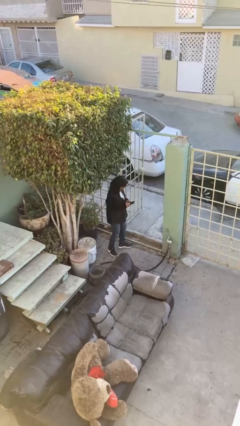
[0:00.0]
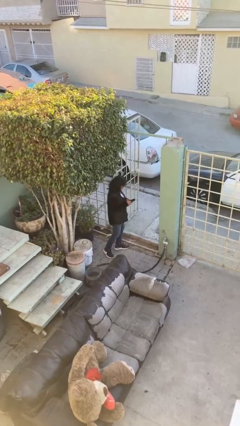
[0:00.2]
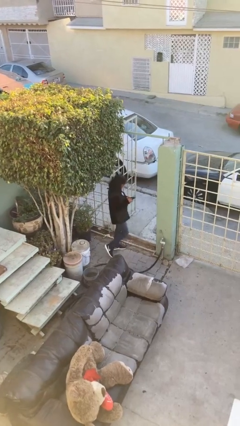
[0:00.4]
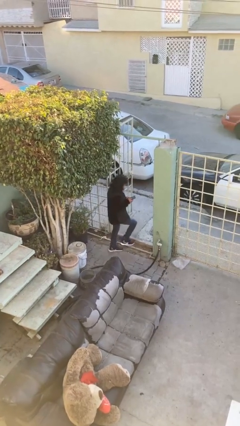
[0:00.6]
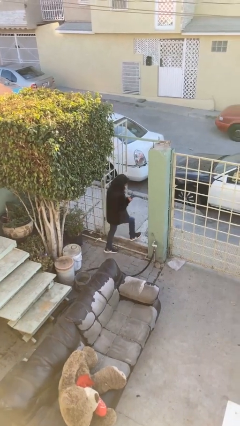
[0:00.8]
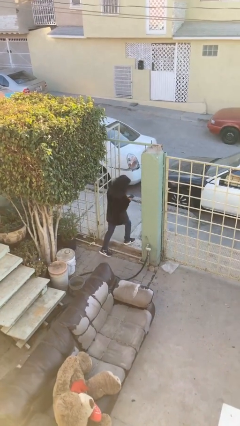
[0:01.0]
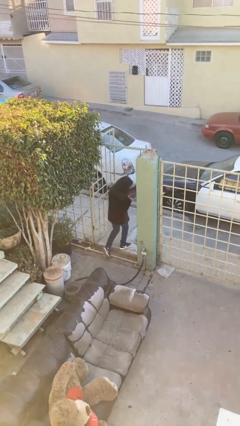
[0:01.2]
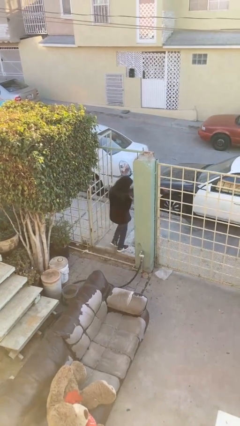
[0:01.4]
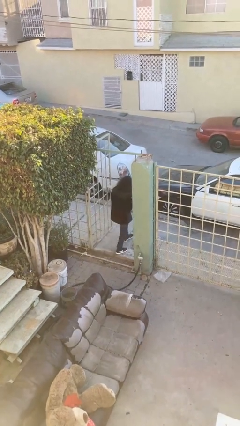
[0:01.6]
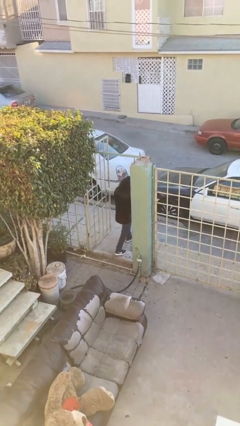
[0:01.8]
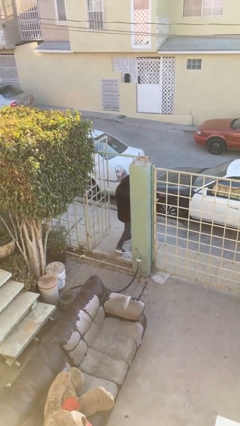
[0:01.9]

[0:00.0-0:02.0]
person exits scene through structure

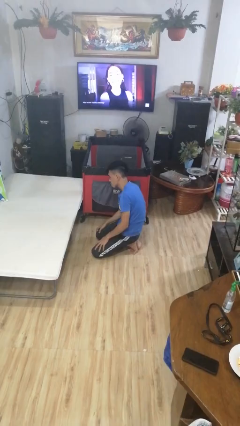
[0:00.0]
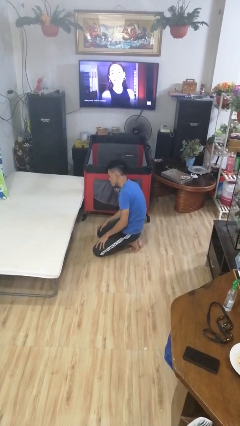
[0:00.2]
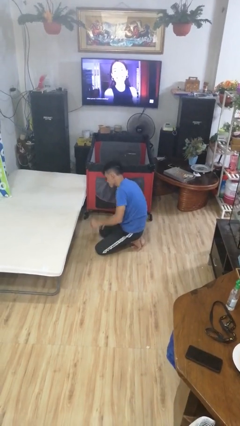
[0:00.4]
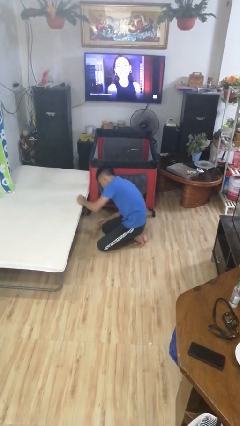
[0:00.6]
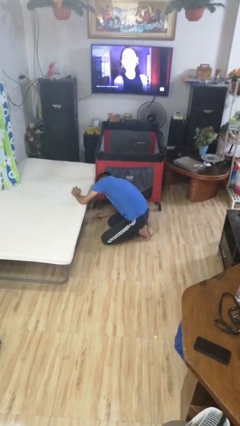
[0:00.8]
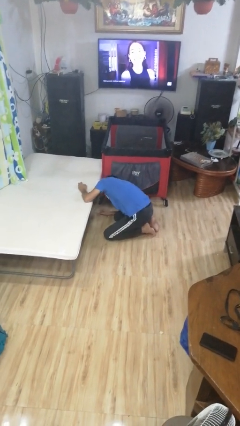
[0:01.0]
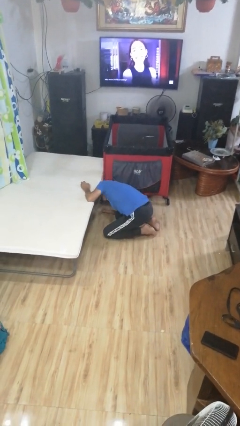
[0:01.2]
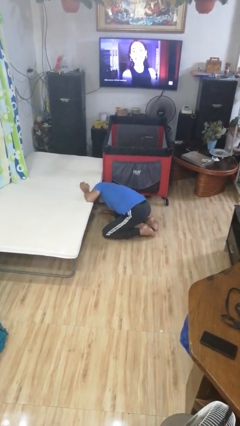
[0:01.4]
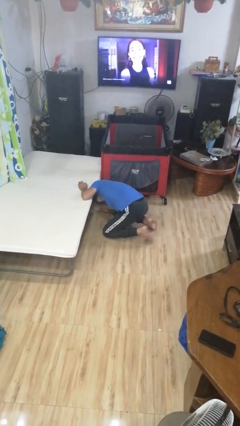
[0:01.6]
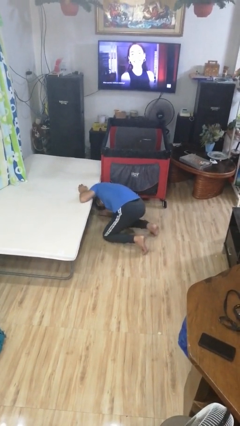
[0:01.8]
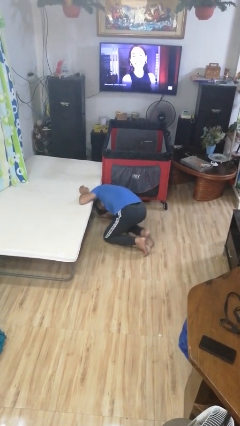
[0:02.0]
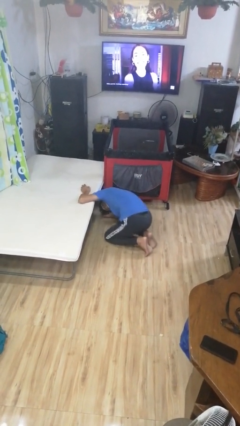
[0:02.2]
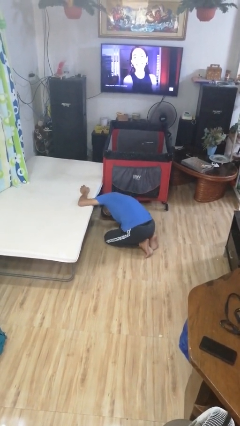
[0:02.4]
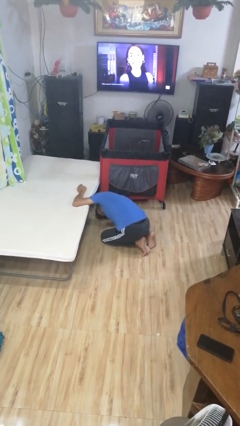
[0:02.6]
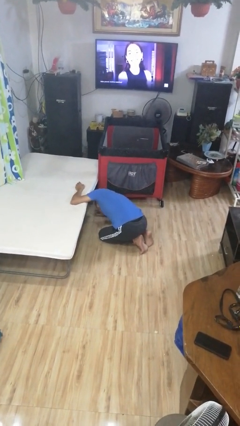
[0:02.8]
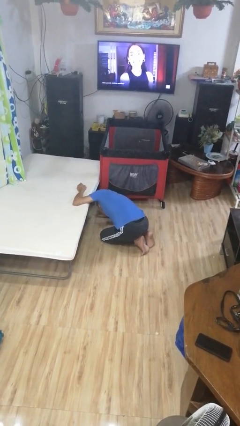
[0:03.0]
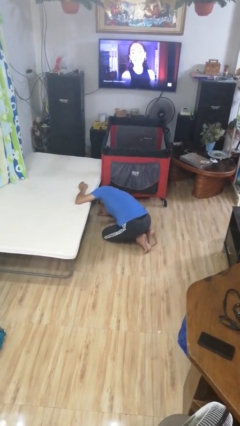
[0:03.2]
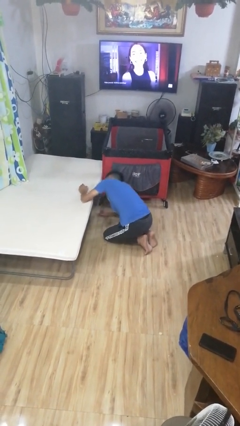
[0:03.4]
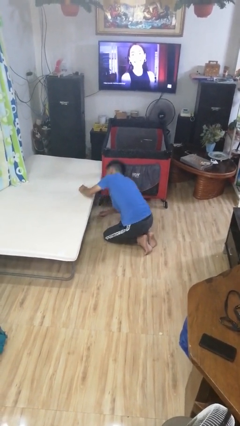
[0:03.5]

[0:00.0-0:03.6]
person searches under bed

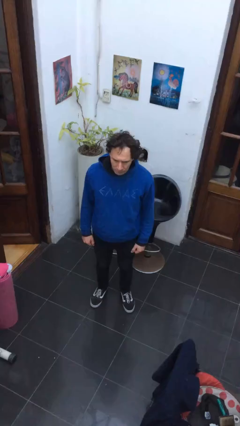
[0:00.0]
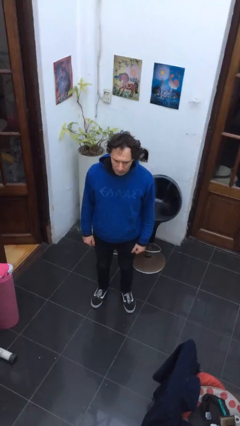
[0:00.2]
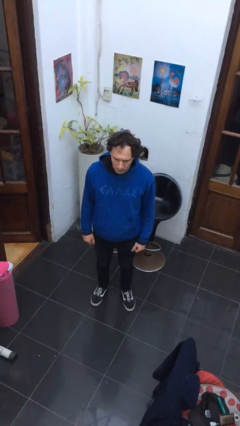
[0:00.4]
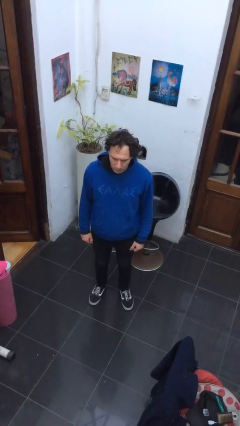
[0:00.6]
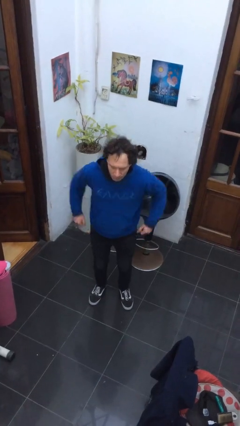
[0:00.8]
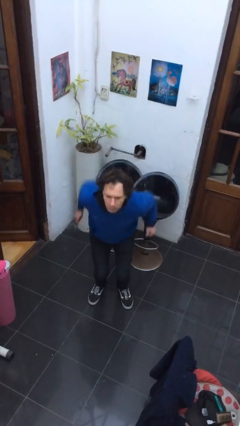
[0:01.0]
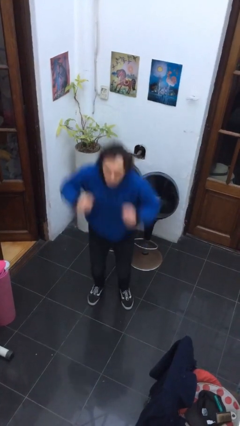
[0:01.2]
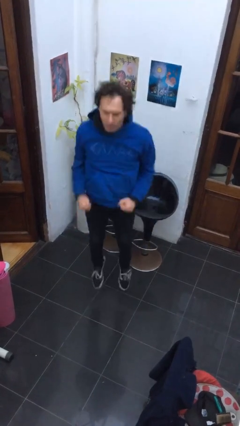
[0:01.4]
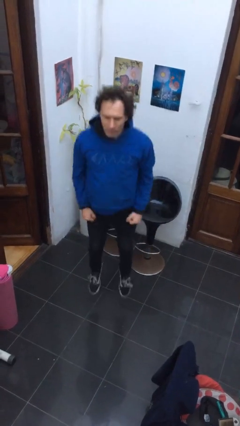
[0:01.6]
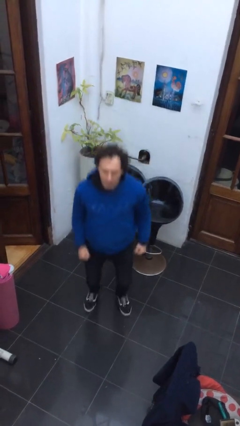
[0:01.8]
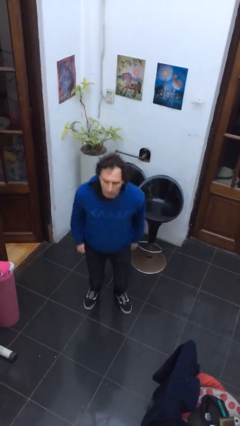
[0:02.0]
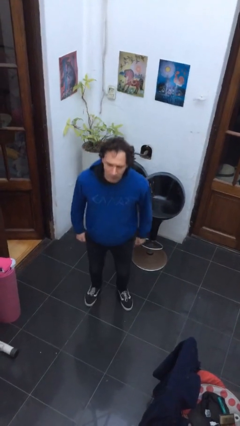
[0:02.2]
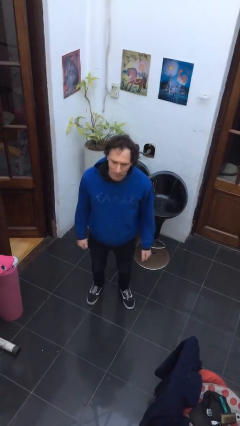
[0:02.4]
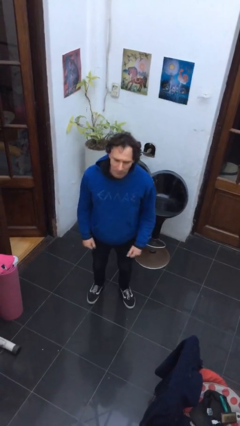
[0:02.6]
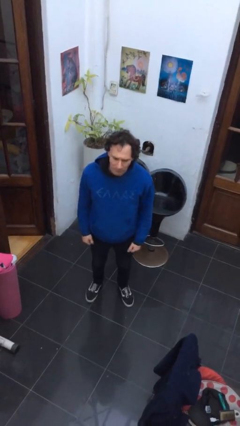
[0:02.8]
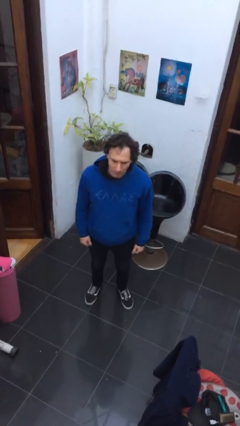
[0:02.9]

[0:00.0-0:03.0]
person jumps

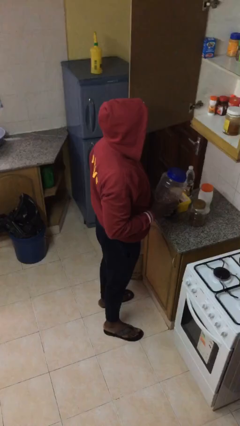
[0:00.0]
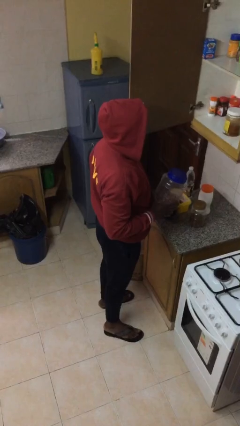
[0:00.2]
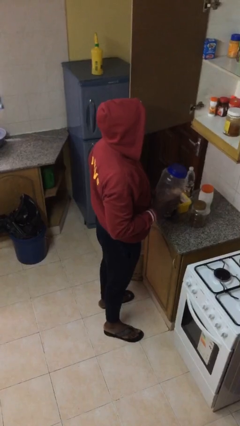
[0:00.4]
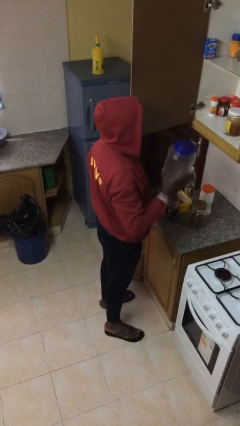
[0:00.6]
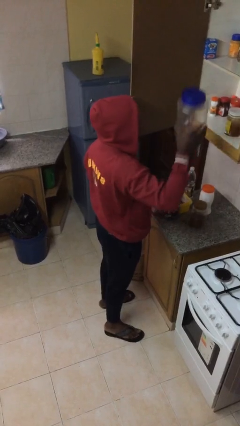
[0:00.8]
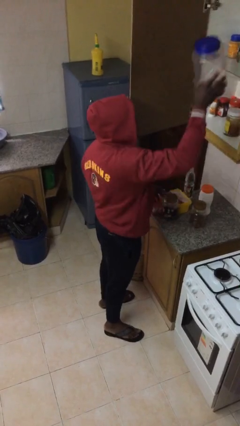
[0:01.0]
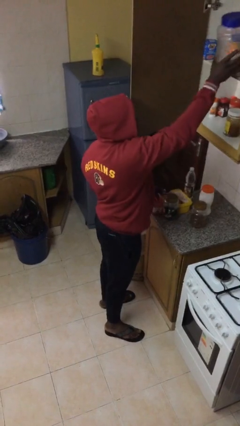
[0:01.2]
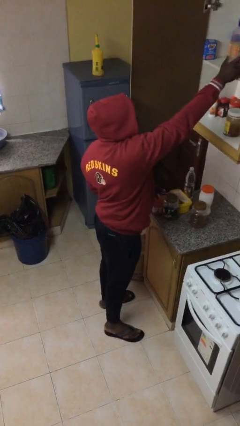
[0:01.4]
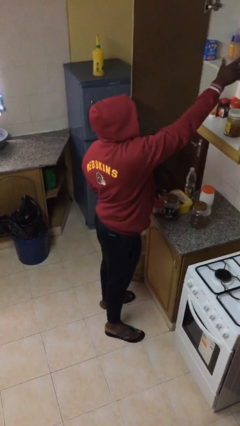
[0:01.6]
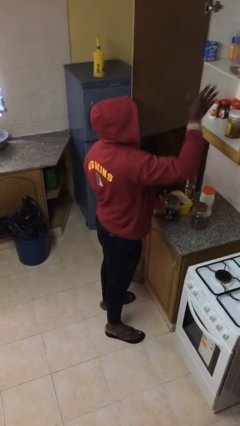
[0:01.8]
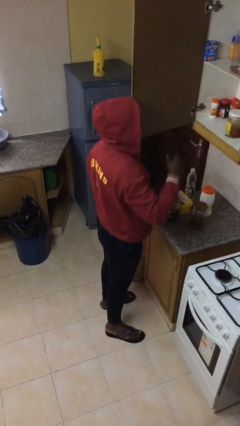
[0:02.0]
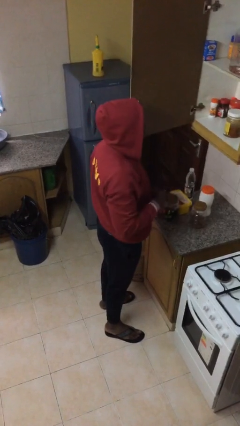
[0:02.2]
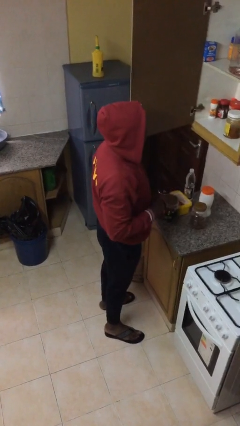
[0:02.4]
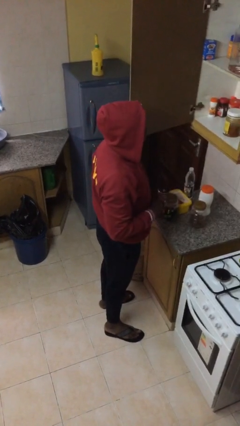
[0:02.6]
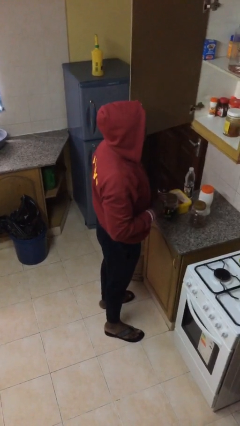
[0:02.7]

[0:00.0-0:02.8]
person puts down object on shelf

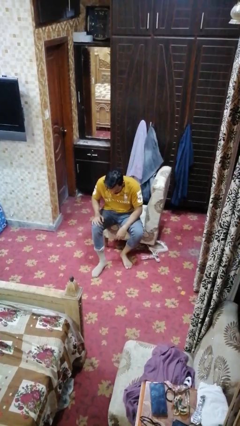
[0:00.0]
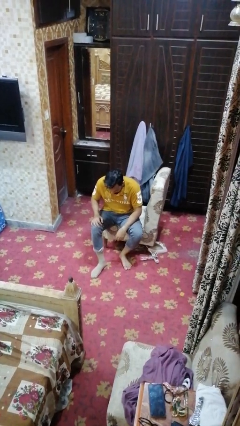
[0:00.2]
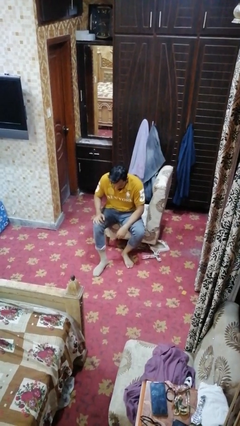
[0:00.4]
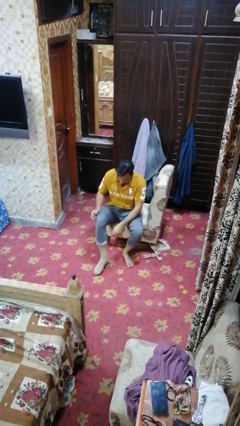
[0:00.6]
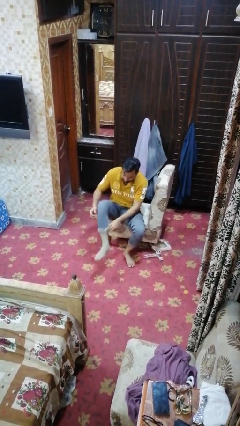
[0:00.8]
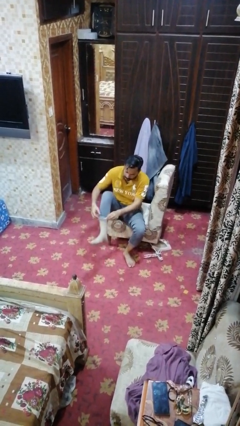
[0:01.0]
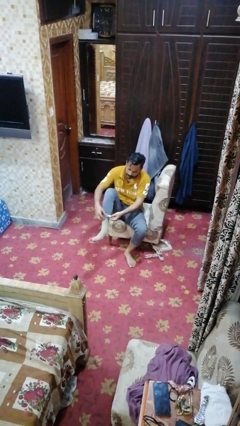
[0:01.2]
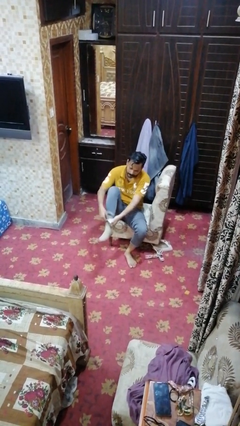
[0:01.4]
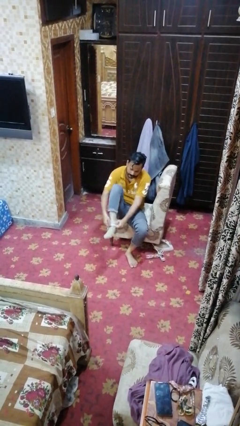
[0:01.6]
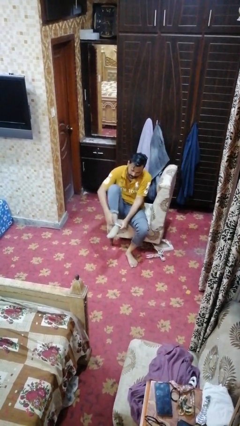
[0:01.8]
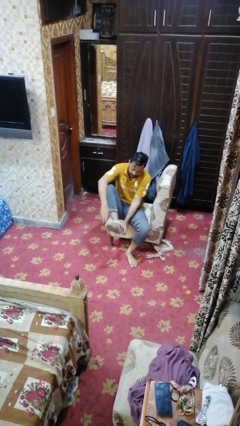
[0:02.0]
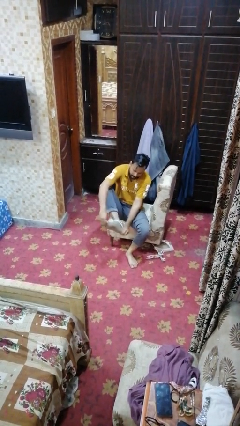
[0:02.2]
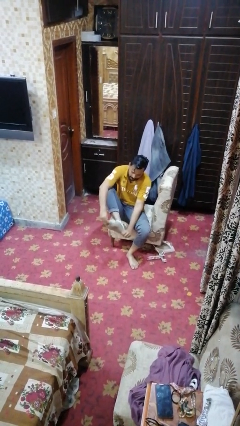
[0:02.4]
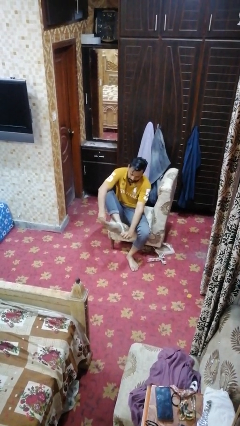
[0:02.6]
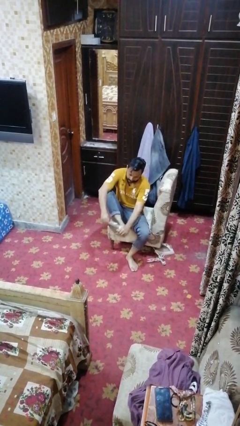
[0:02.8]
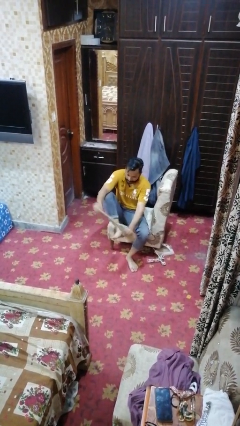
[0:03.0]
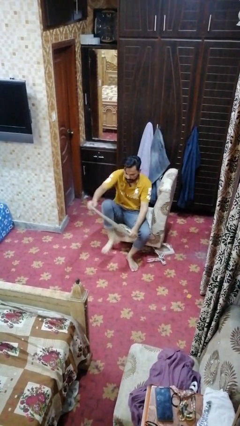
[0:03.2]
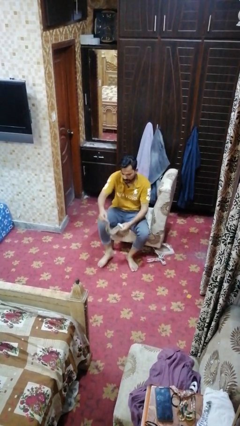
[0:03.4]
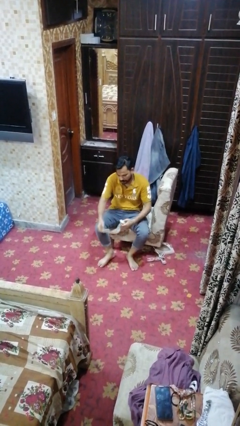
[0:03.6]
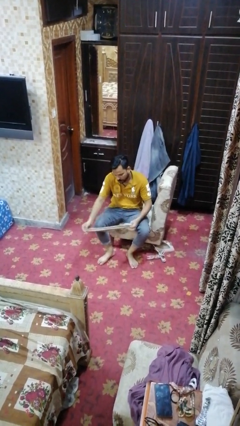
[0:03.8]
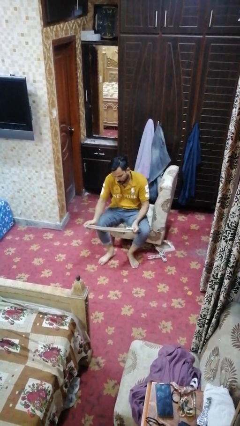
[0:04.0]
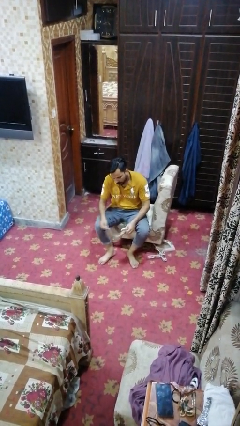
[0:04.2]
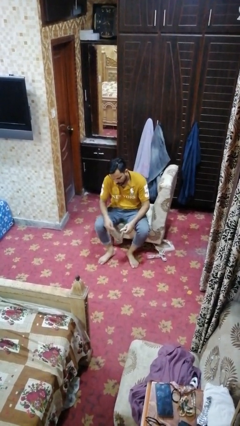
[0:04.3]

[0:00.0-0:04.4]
person takes off socks

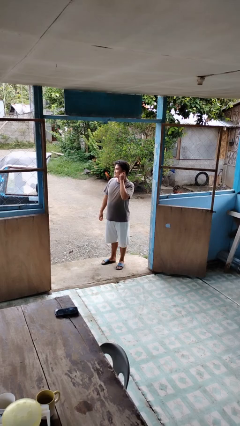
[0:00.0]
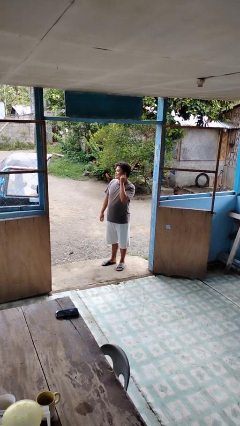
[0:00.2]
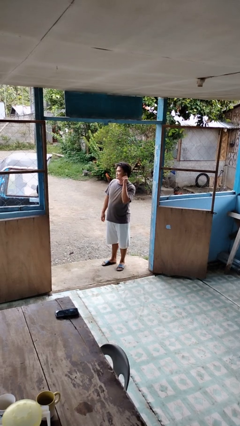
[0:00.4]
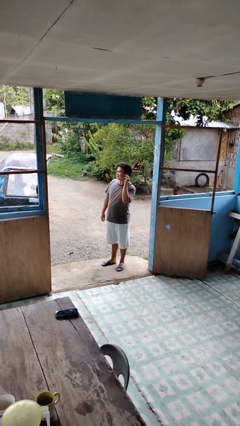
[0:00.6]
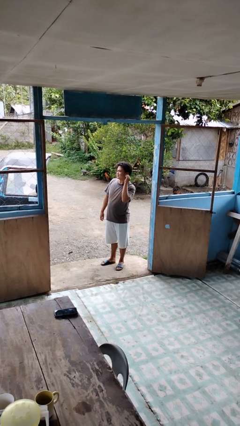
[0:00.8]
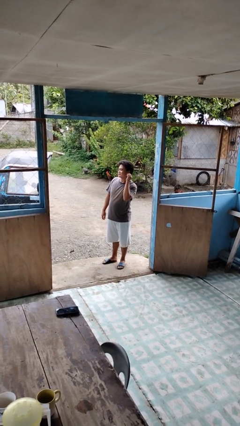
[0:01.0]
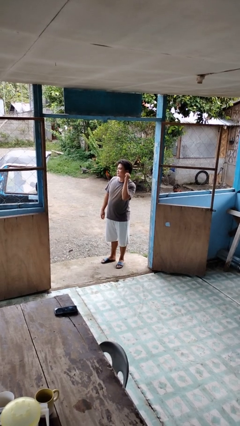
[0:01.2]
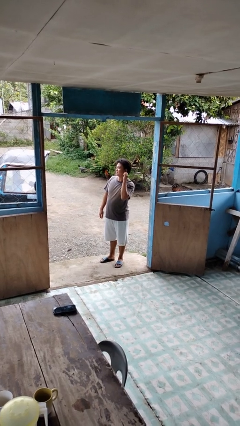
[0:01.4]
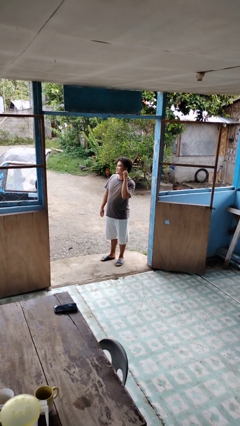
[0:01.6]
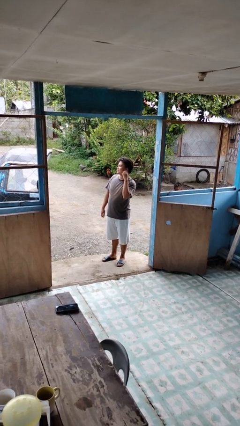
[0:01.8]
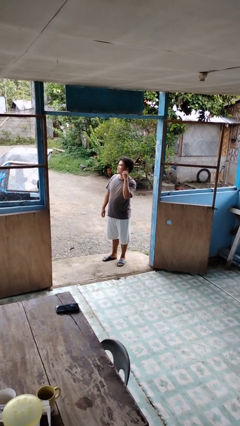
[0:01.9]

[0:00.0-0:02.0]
person touches earlobe
